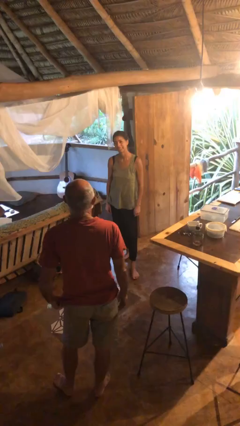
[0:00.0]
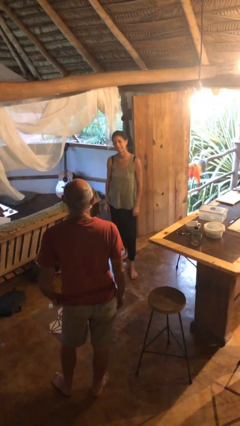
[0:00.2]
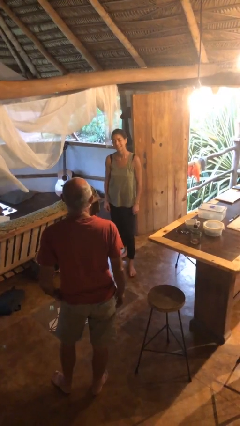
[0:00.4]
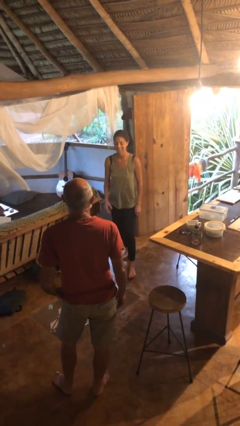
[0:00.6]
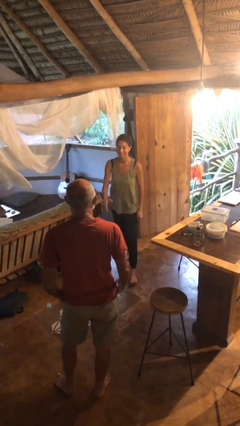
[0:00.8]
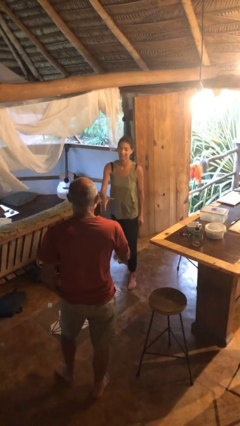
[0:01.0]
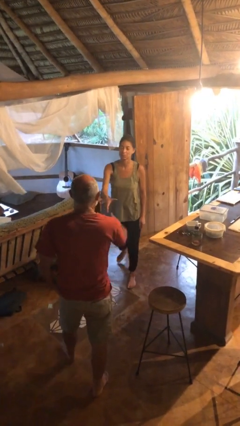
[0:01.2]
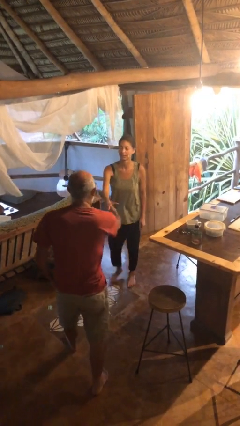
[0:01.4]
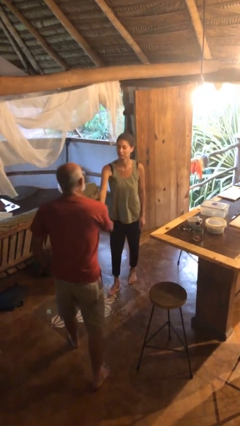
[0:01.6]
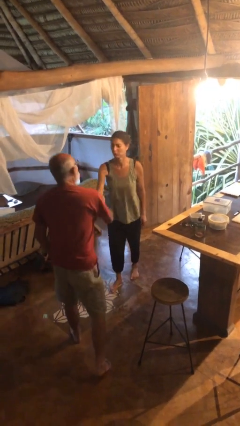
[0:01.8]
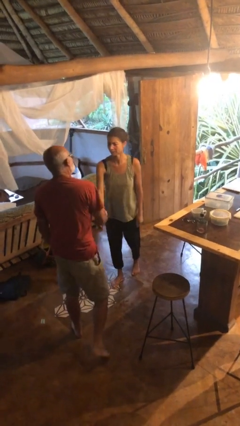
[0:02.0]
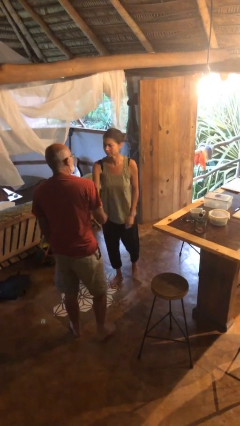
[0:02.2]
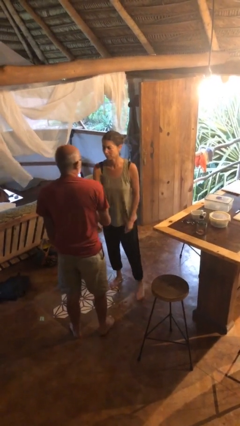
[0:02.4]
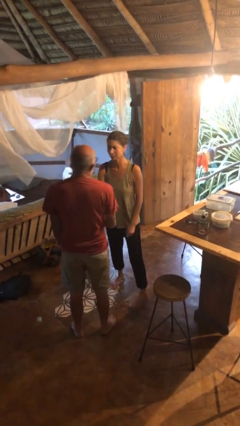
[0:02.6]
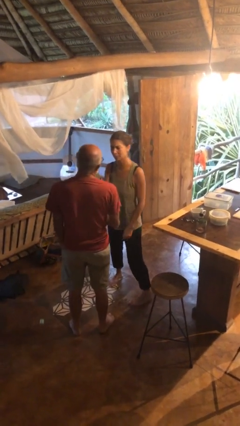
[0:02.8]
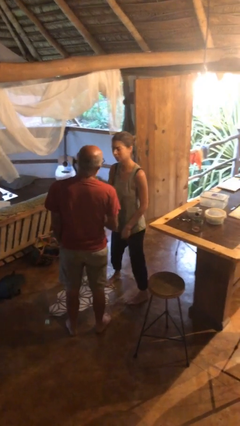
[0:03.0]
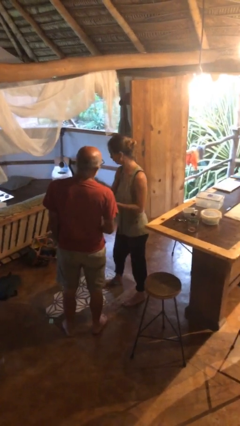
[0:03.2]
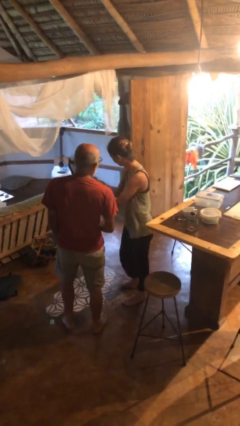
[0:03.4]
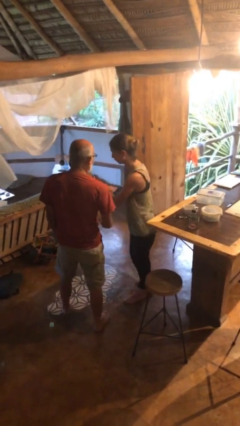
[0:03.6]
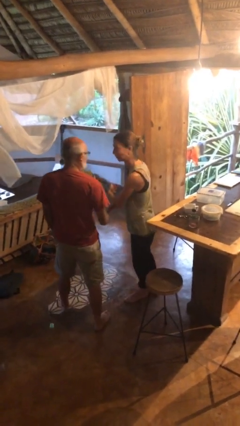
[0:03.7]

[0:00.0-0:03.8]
person shakes hand

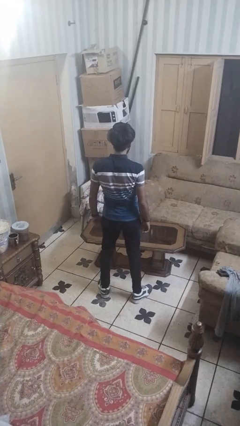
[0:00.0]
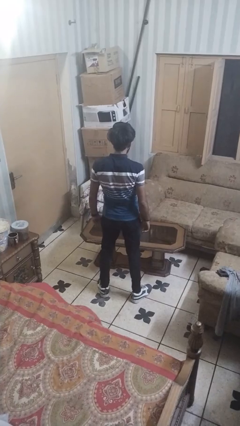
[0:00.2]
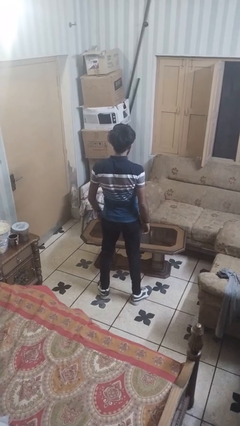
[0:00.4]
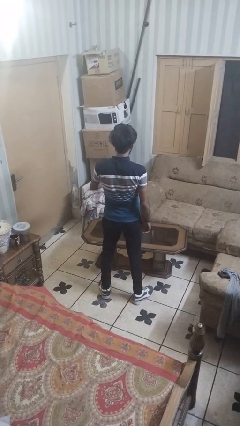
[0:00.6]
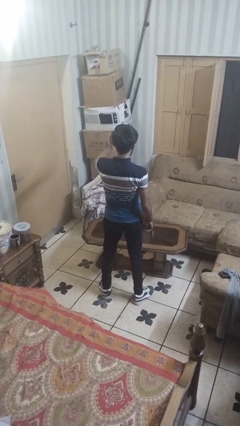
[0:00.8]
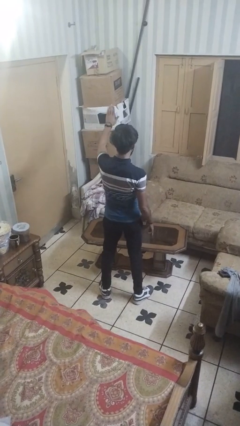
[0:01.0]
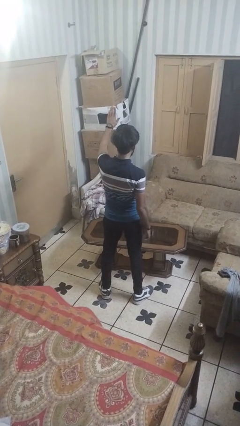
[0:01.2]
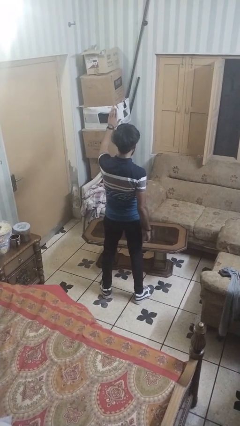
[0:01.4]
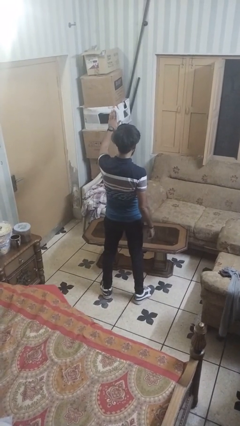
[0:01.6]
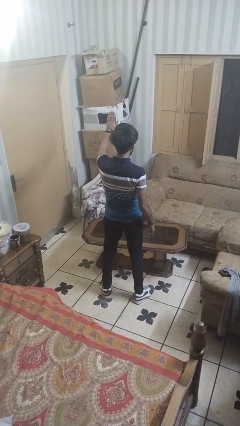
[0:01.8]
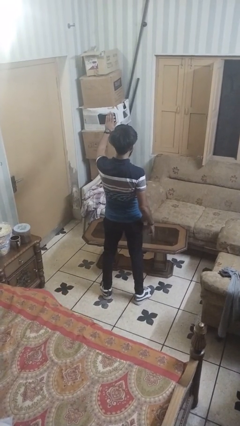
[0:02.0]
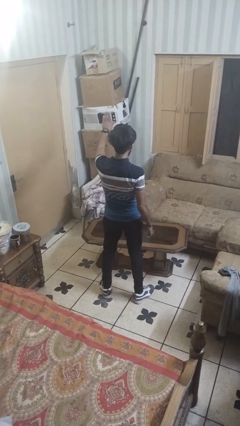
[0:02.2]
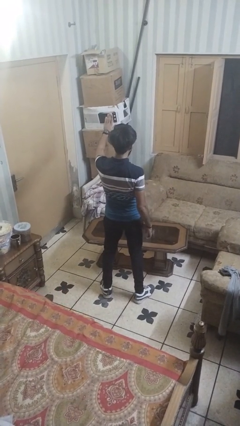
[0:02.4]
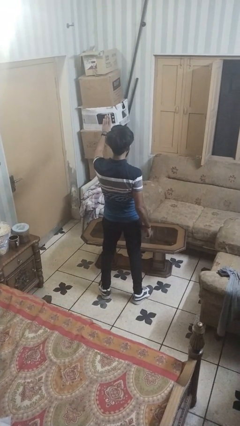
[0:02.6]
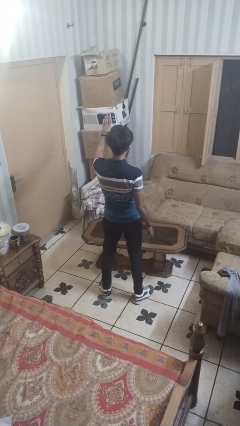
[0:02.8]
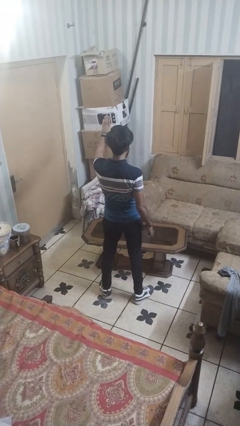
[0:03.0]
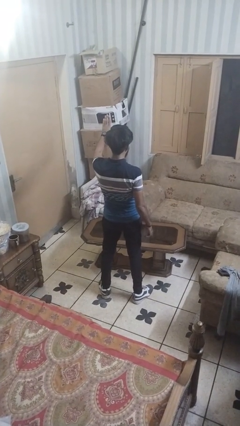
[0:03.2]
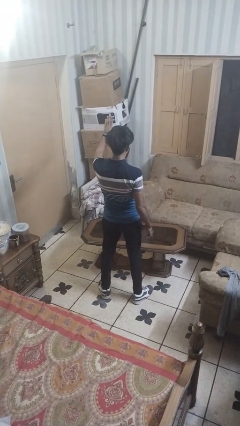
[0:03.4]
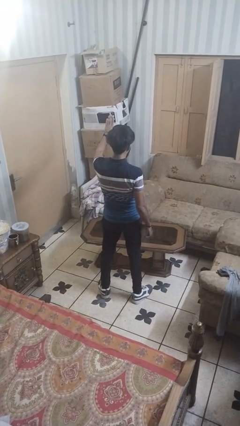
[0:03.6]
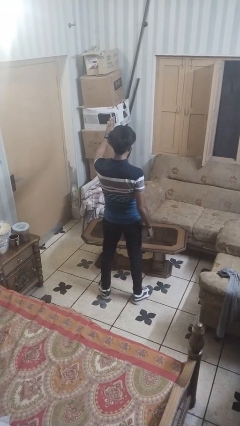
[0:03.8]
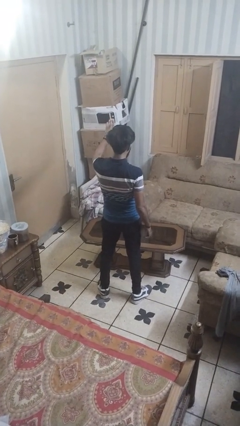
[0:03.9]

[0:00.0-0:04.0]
person gestures stop

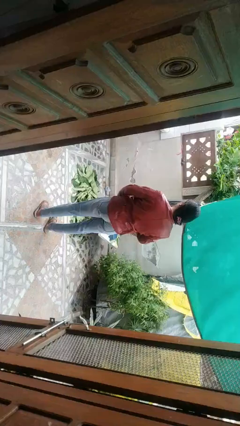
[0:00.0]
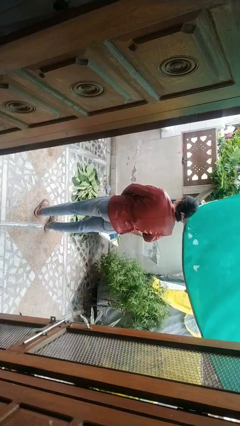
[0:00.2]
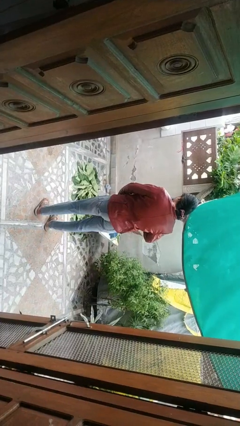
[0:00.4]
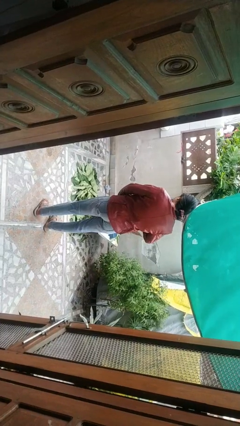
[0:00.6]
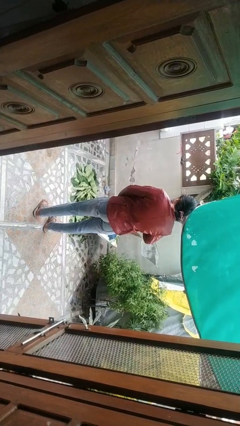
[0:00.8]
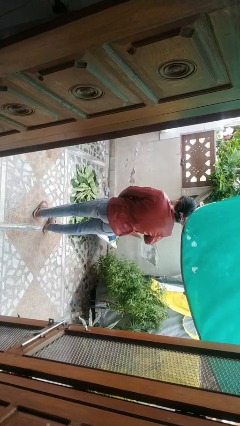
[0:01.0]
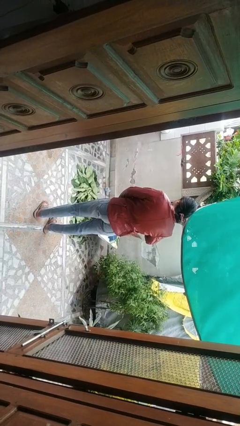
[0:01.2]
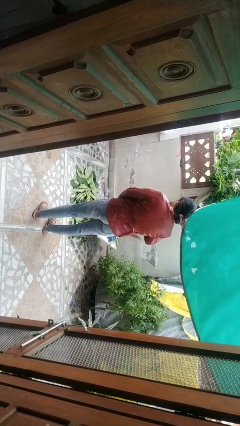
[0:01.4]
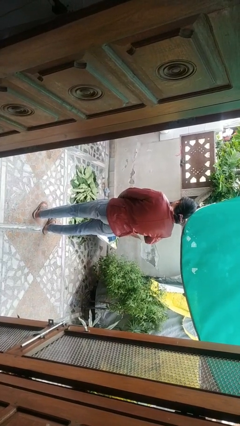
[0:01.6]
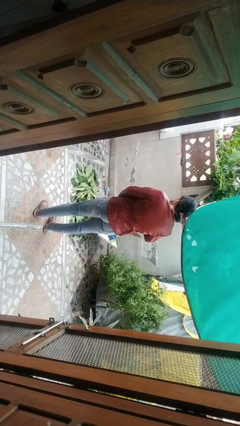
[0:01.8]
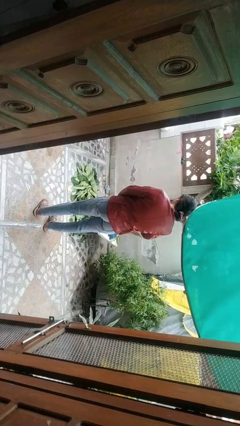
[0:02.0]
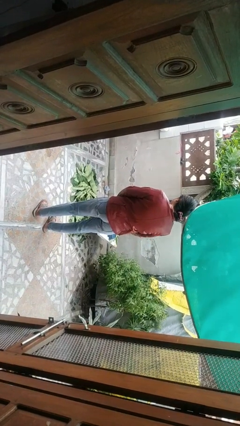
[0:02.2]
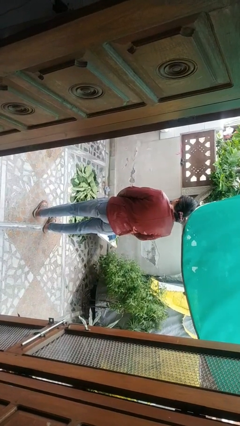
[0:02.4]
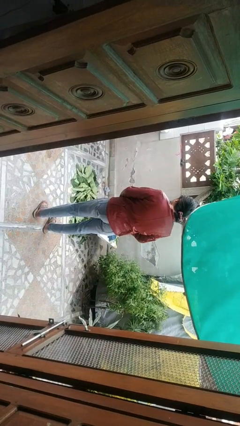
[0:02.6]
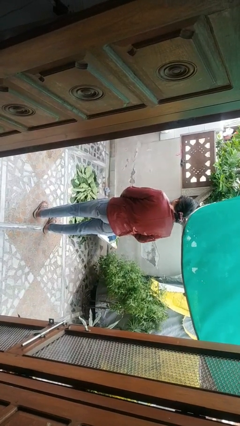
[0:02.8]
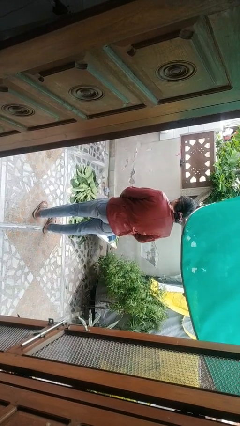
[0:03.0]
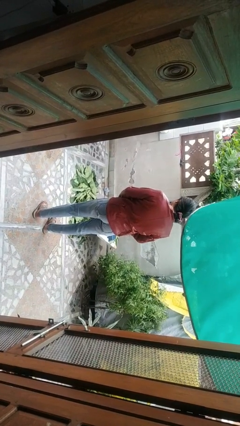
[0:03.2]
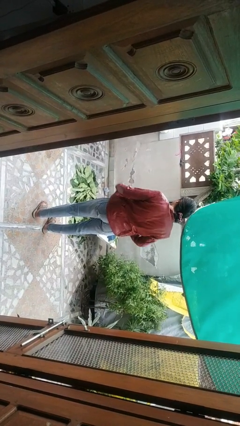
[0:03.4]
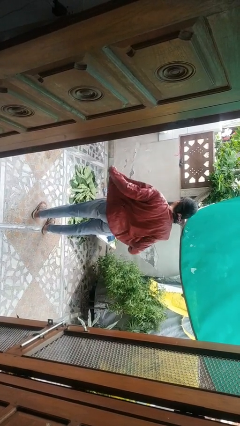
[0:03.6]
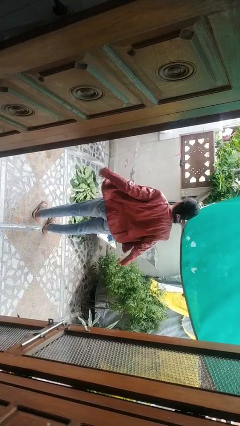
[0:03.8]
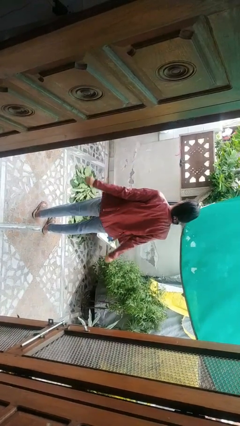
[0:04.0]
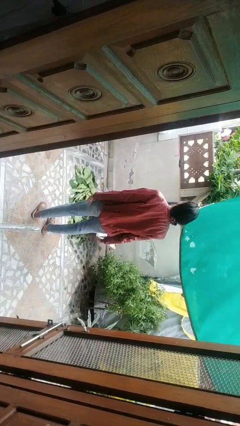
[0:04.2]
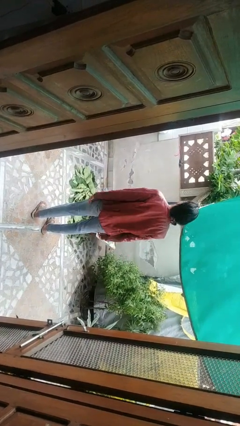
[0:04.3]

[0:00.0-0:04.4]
person unzips jacket

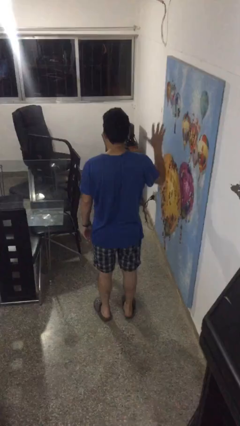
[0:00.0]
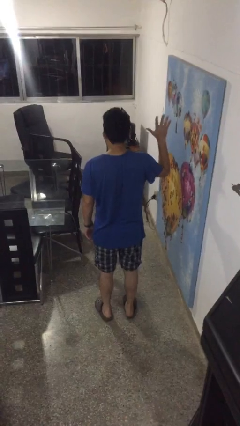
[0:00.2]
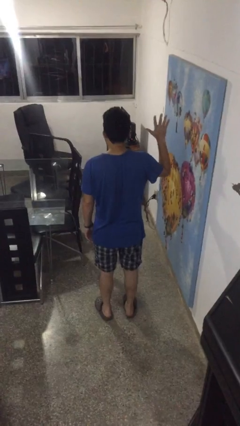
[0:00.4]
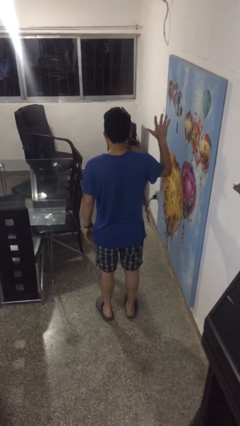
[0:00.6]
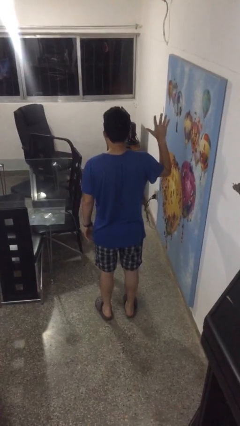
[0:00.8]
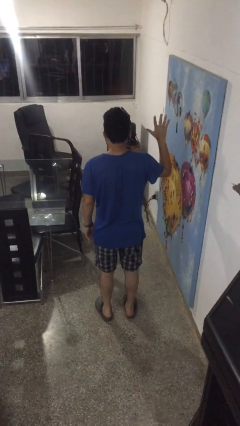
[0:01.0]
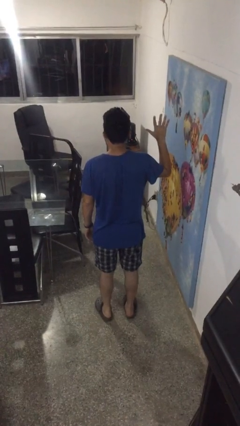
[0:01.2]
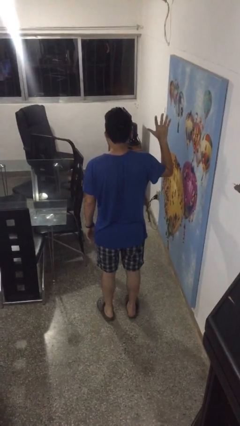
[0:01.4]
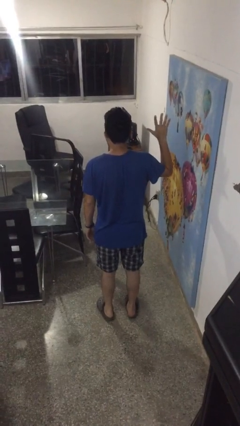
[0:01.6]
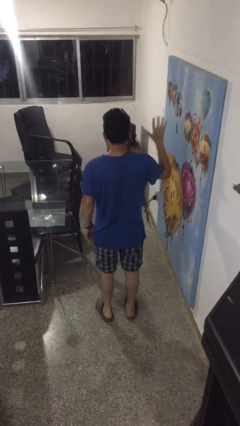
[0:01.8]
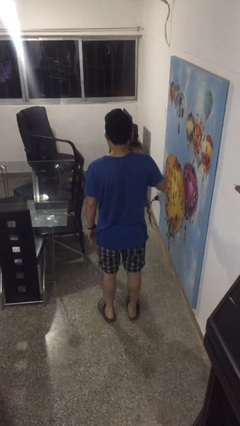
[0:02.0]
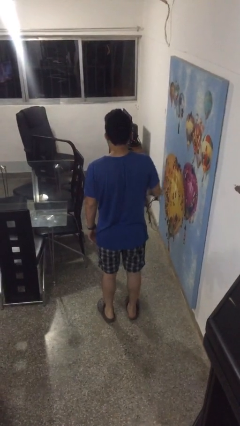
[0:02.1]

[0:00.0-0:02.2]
person gestures number five

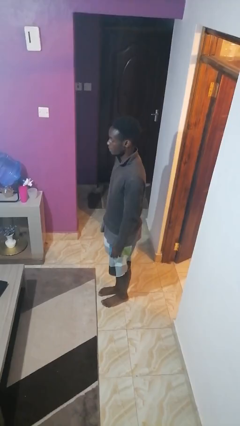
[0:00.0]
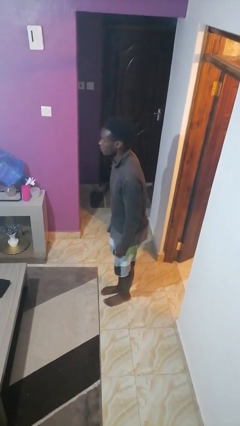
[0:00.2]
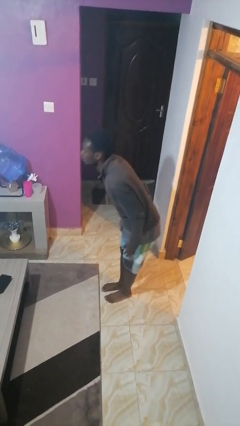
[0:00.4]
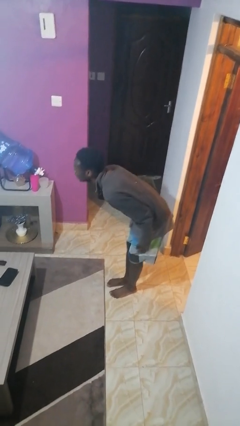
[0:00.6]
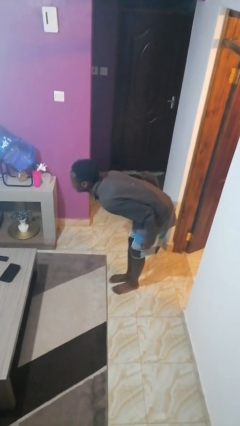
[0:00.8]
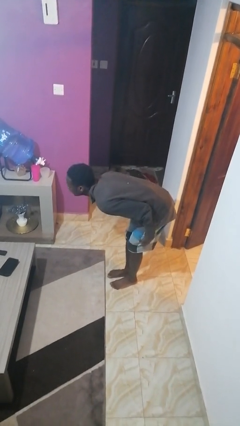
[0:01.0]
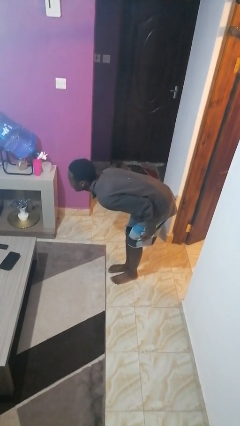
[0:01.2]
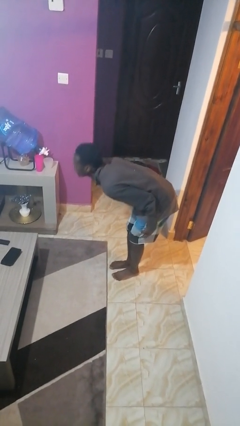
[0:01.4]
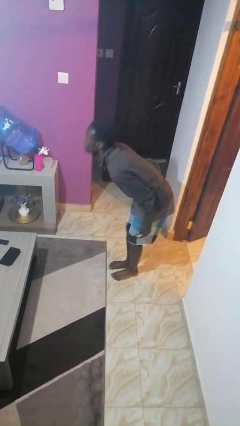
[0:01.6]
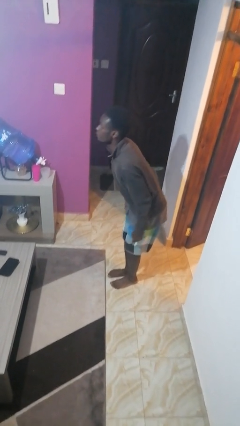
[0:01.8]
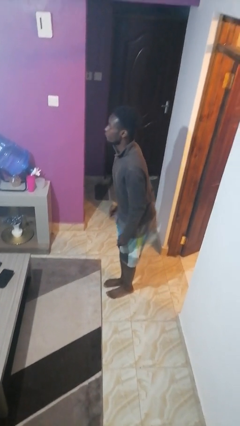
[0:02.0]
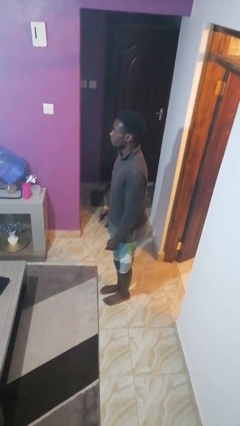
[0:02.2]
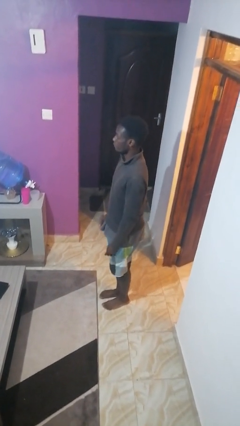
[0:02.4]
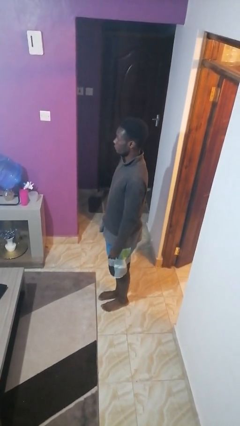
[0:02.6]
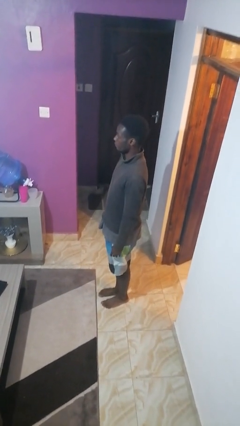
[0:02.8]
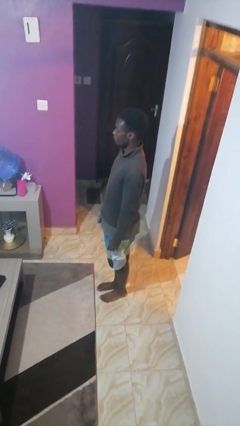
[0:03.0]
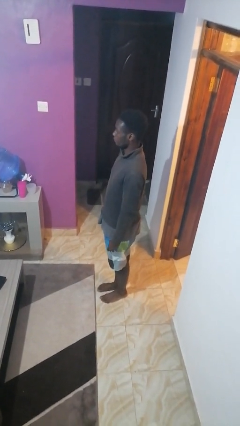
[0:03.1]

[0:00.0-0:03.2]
person bows
